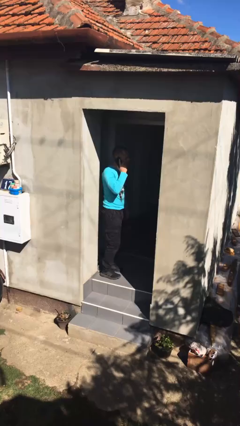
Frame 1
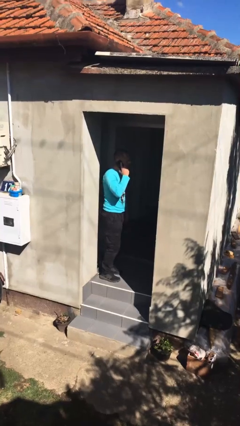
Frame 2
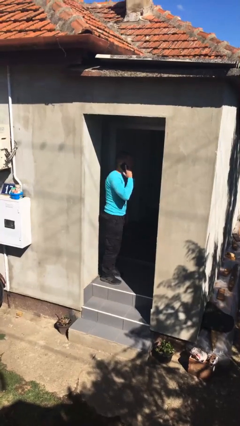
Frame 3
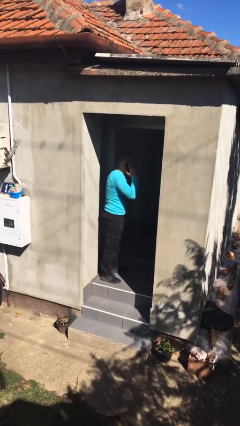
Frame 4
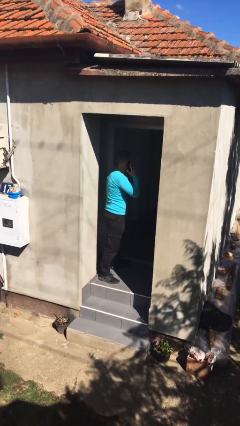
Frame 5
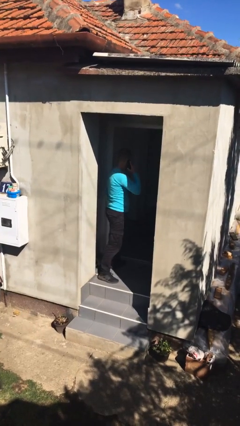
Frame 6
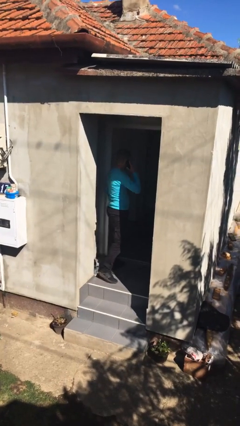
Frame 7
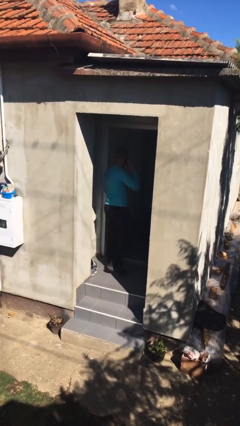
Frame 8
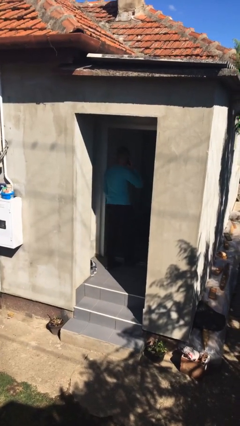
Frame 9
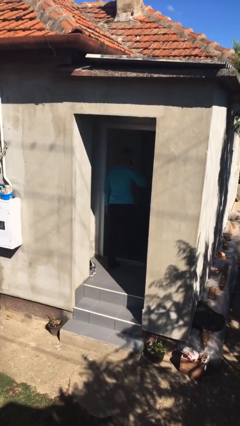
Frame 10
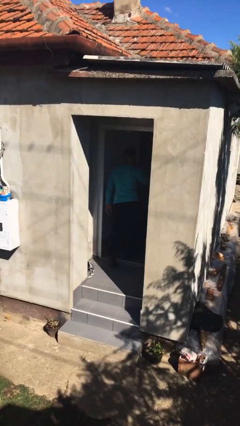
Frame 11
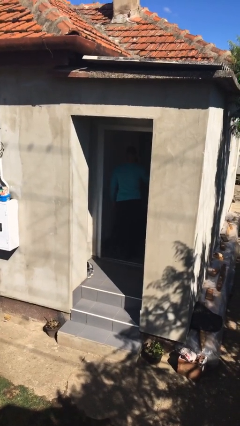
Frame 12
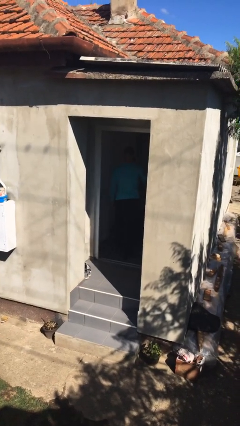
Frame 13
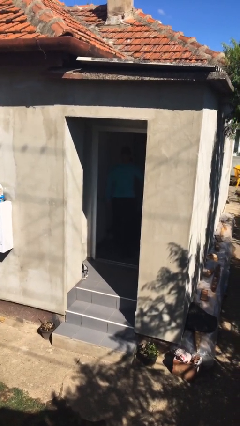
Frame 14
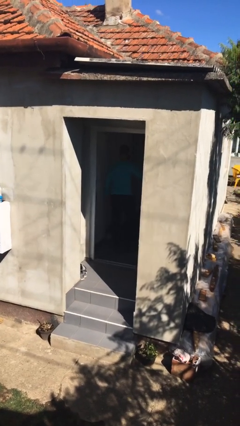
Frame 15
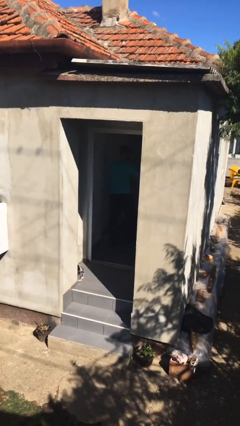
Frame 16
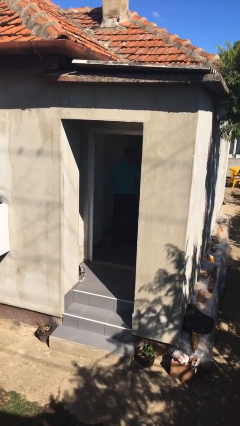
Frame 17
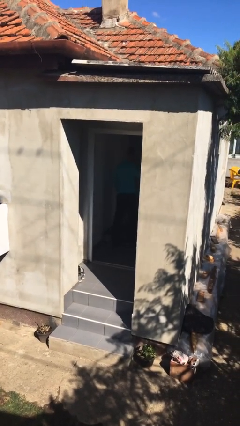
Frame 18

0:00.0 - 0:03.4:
person exits scene through structure

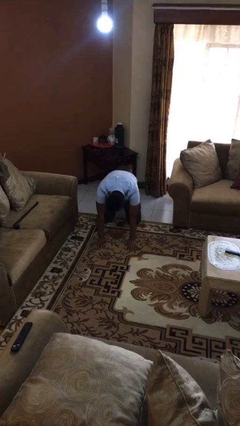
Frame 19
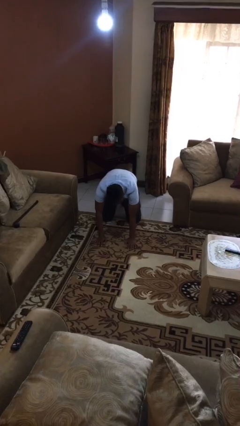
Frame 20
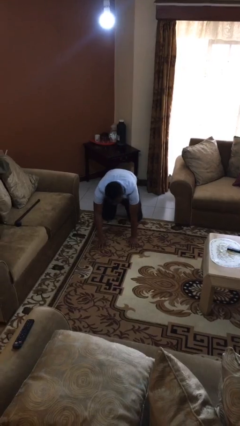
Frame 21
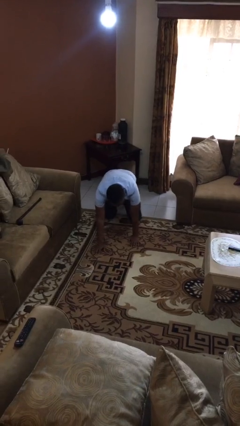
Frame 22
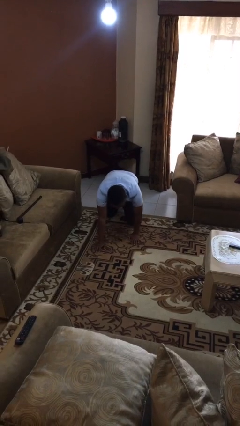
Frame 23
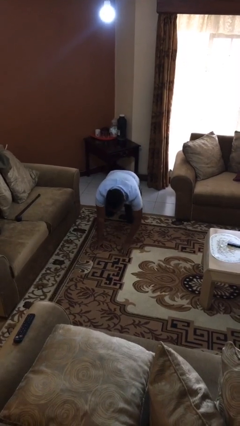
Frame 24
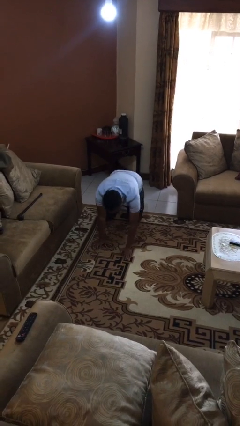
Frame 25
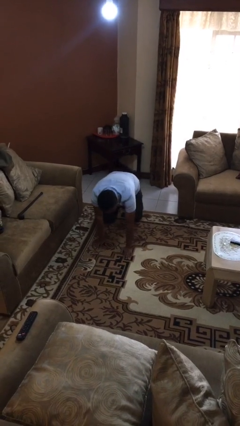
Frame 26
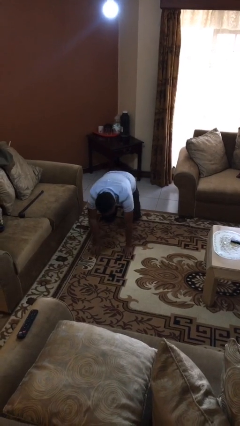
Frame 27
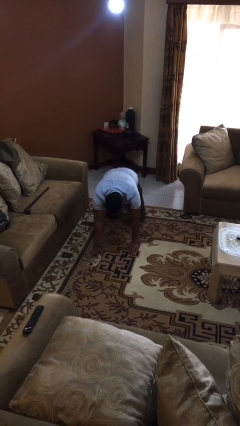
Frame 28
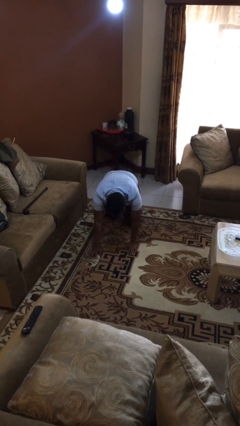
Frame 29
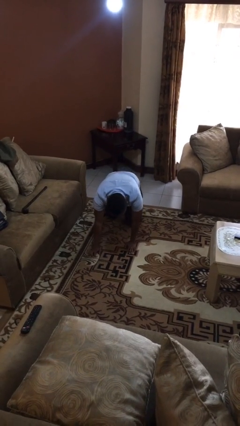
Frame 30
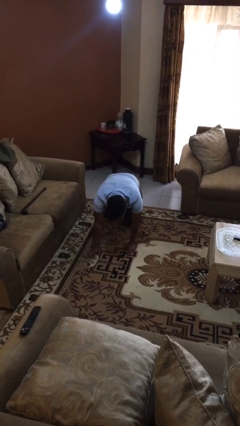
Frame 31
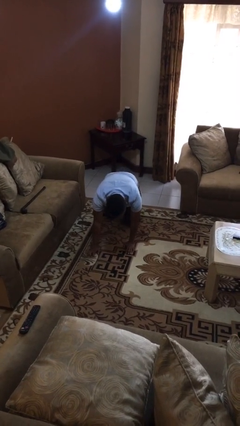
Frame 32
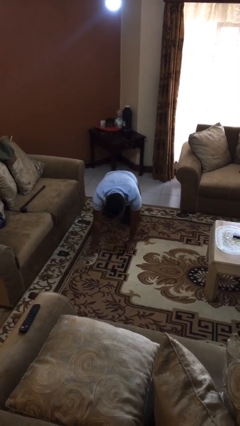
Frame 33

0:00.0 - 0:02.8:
person crawls

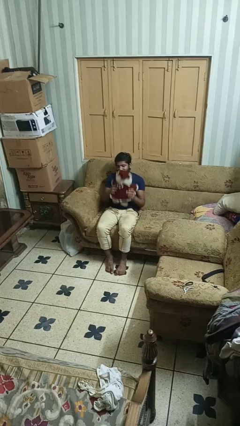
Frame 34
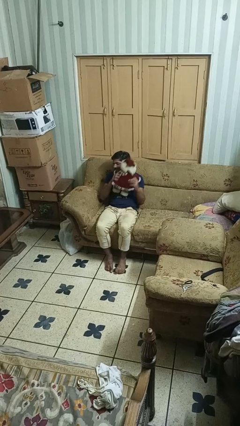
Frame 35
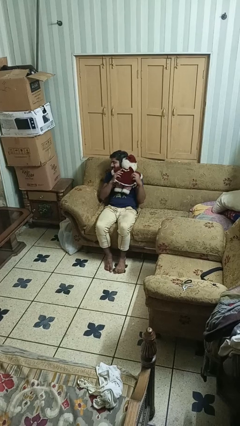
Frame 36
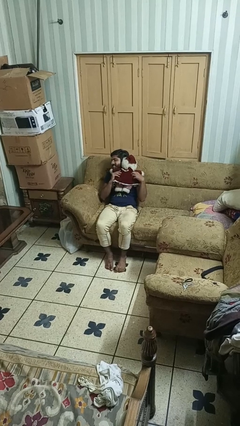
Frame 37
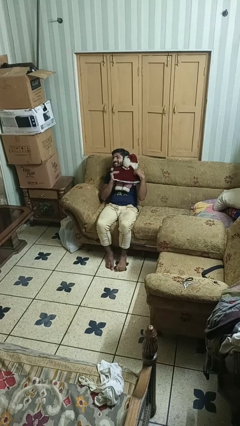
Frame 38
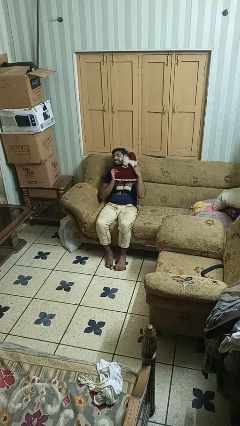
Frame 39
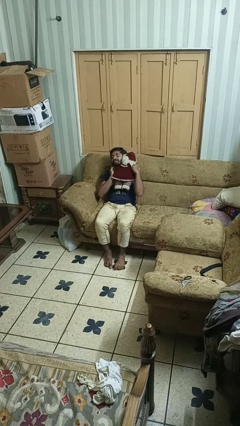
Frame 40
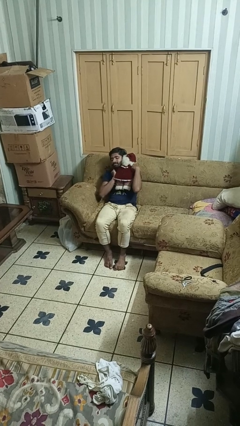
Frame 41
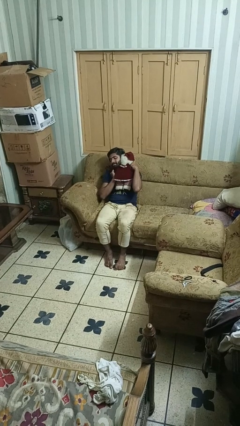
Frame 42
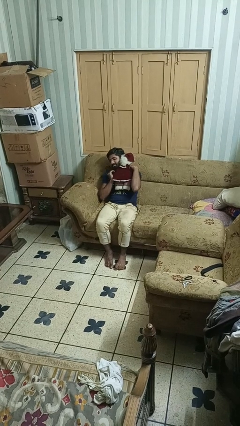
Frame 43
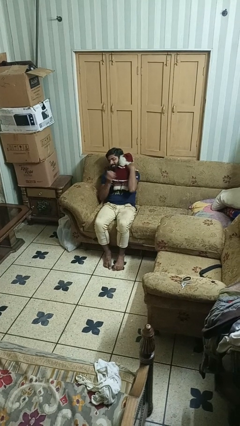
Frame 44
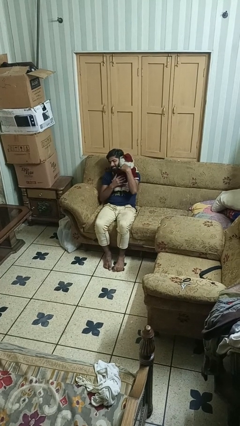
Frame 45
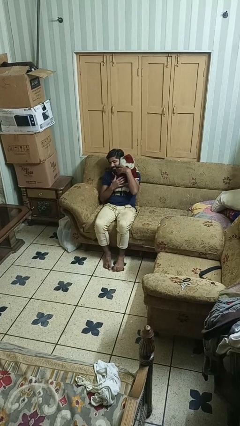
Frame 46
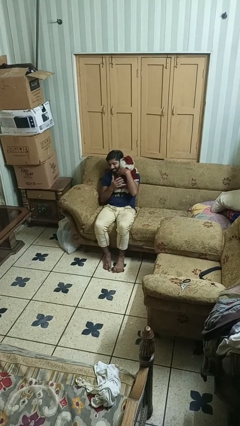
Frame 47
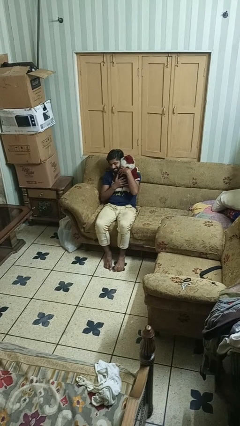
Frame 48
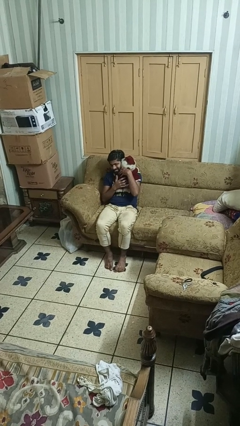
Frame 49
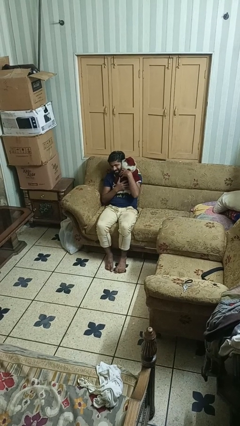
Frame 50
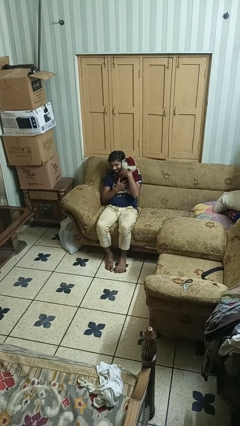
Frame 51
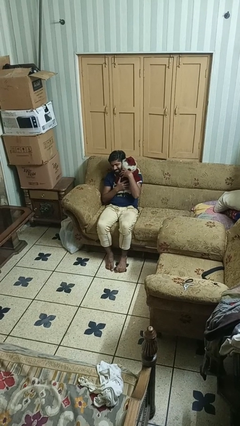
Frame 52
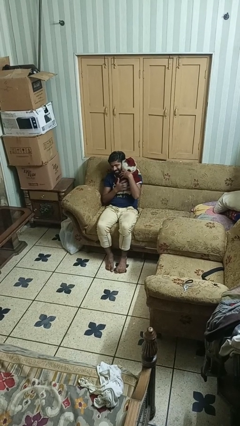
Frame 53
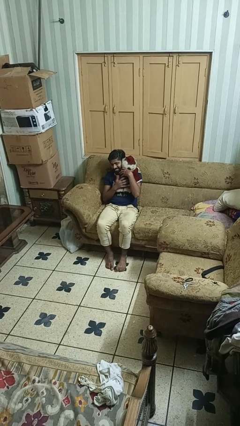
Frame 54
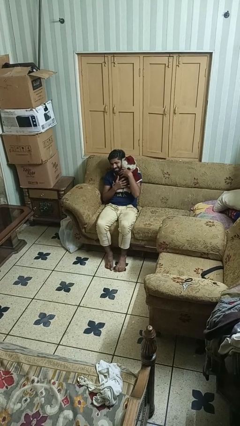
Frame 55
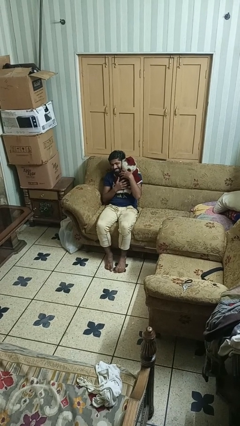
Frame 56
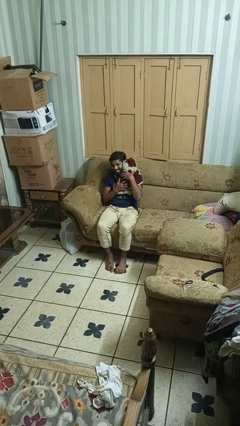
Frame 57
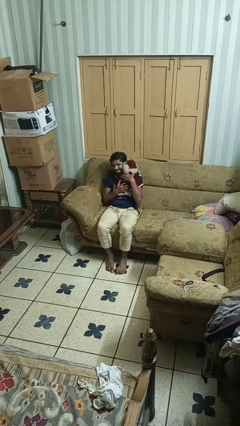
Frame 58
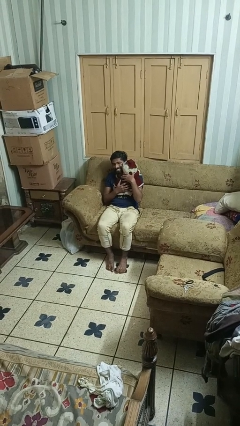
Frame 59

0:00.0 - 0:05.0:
person hugs stuffed animal

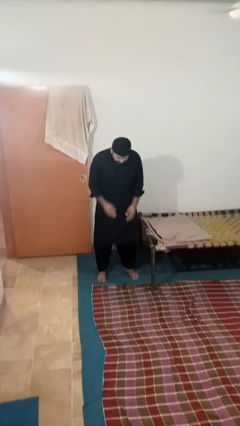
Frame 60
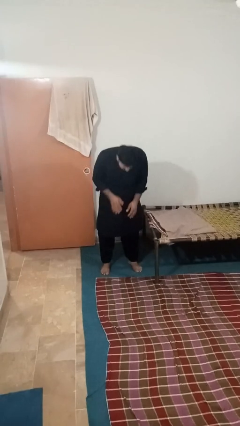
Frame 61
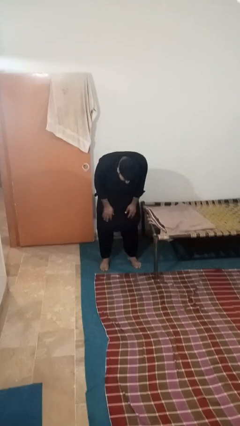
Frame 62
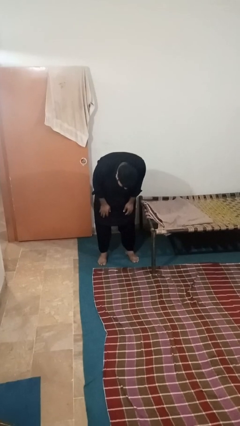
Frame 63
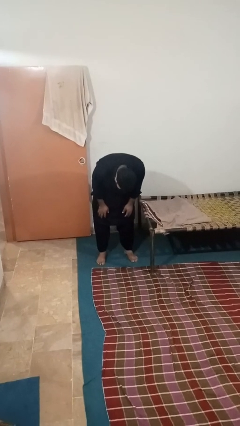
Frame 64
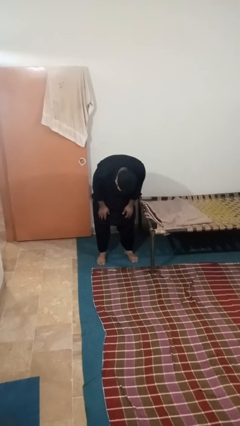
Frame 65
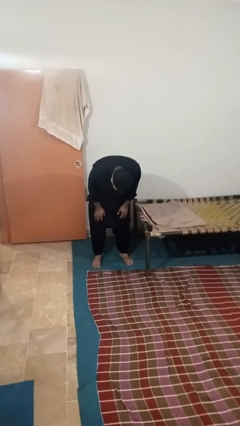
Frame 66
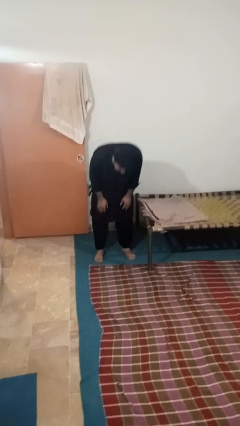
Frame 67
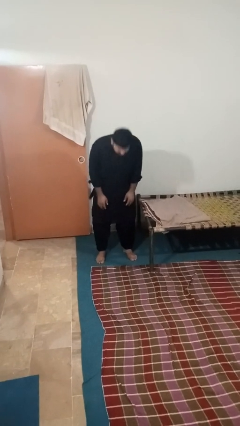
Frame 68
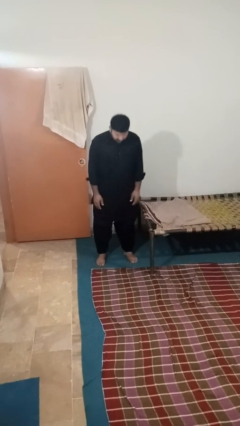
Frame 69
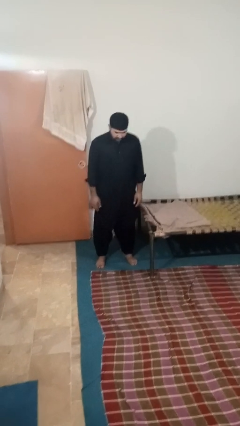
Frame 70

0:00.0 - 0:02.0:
person bows

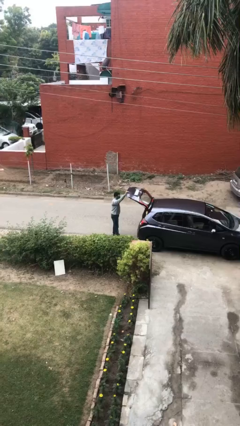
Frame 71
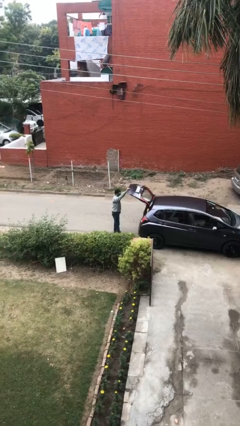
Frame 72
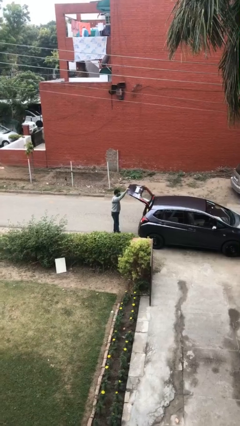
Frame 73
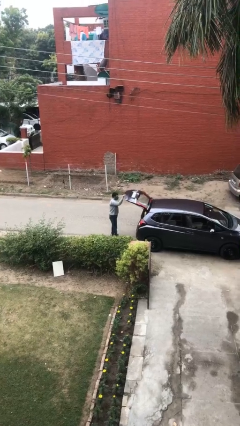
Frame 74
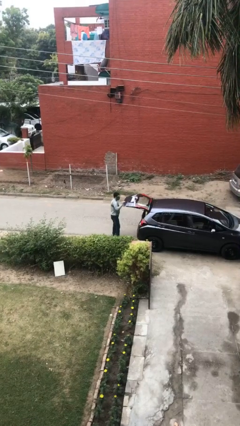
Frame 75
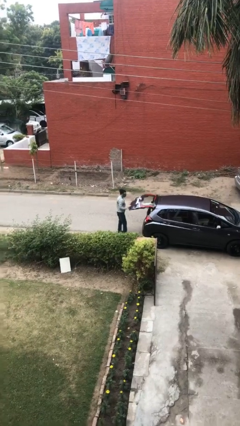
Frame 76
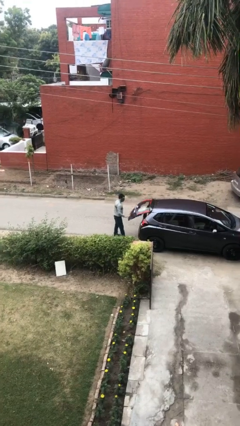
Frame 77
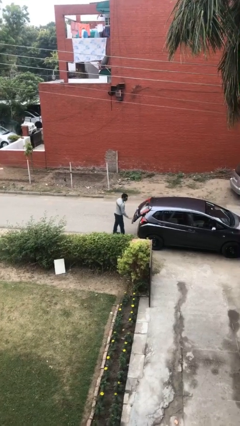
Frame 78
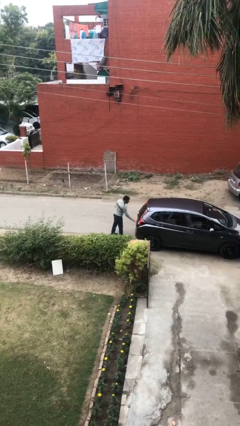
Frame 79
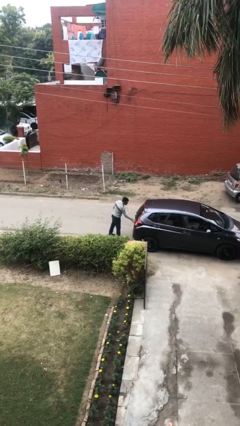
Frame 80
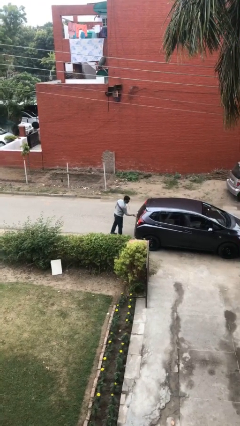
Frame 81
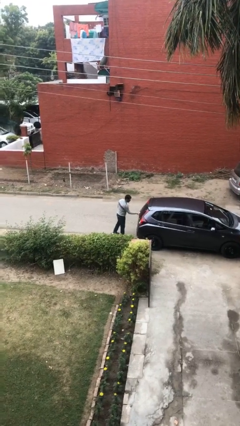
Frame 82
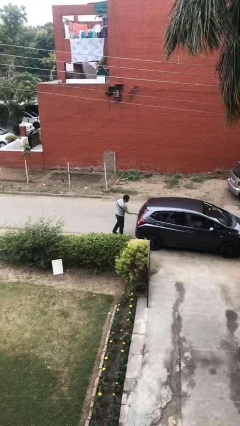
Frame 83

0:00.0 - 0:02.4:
person closes car trunk

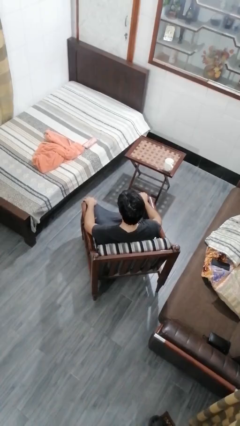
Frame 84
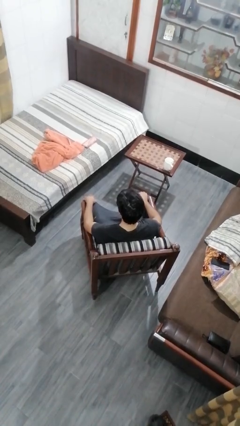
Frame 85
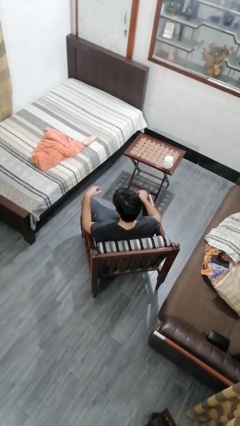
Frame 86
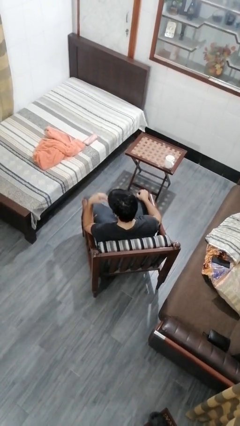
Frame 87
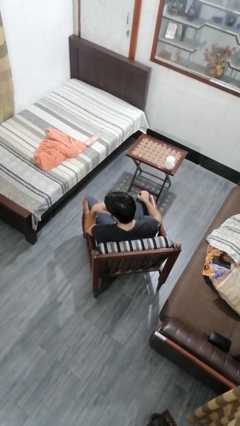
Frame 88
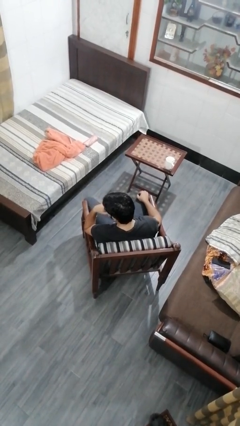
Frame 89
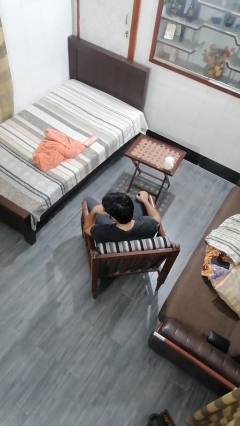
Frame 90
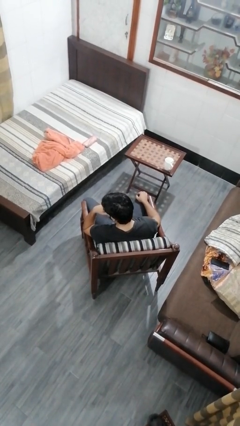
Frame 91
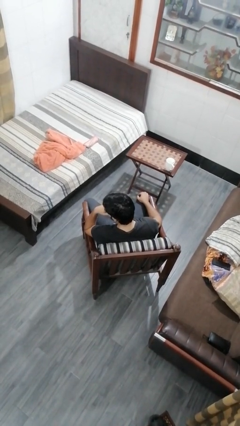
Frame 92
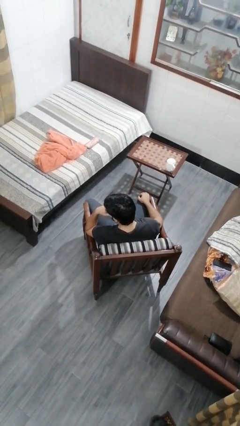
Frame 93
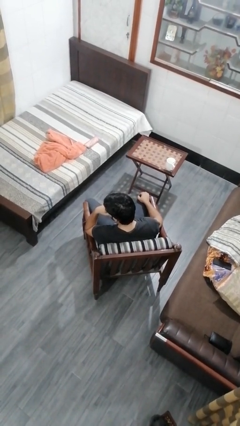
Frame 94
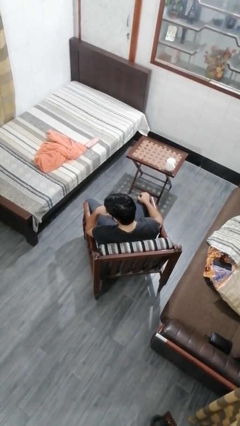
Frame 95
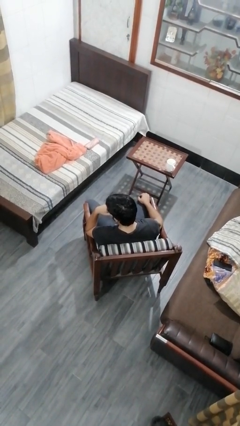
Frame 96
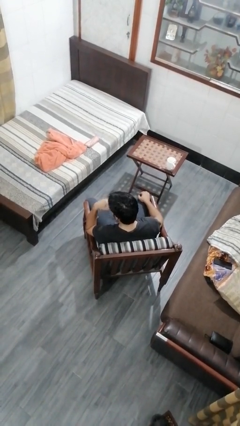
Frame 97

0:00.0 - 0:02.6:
person strokes chin
